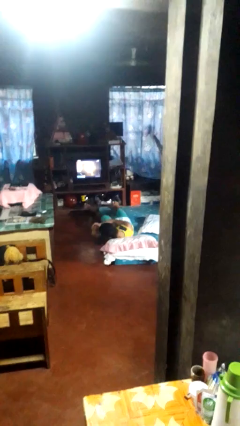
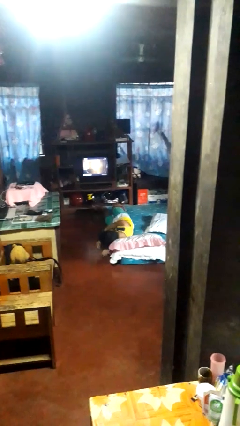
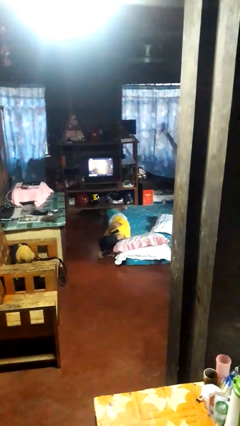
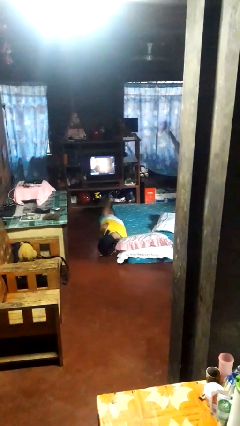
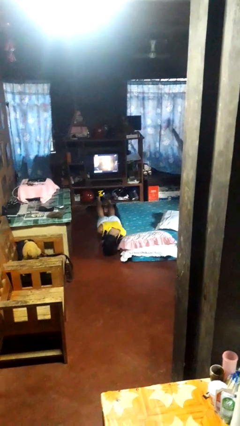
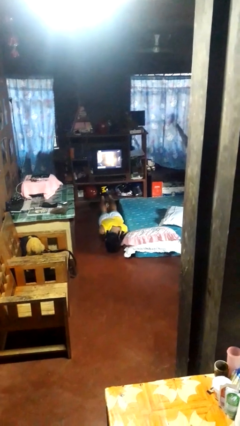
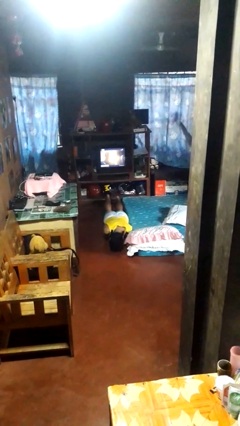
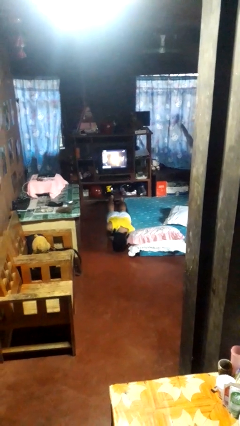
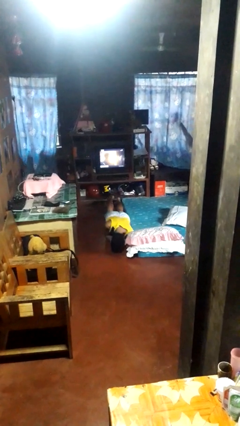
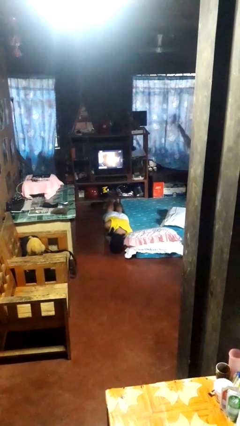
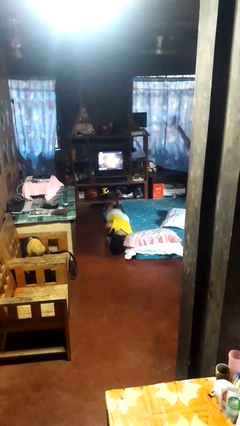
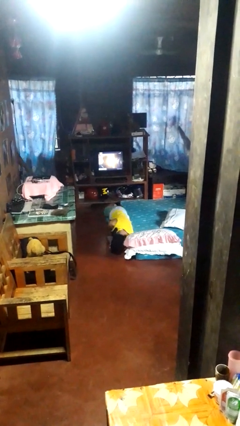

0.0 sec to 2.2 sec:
person falls from bed

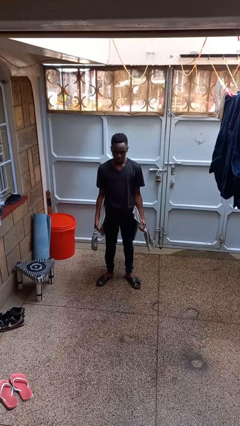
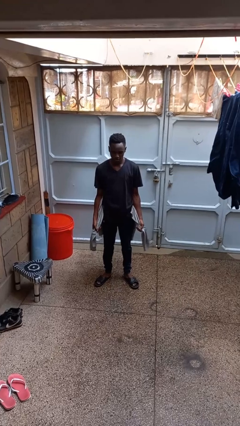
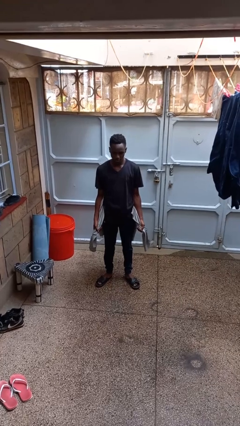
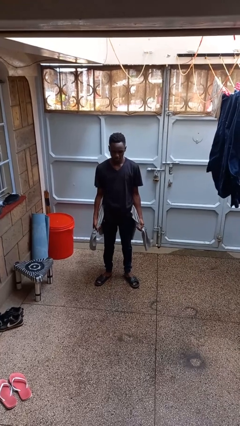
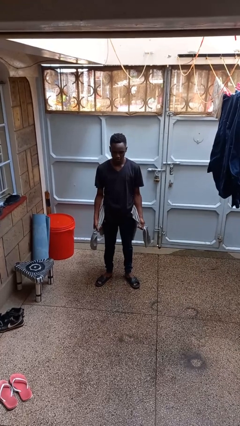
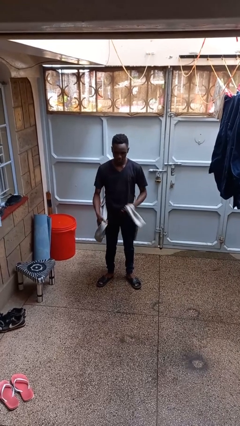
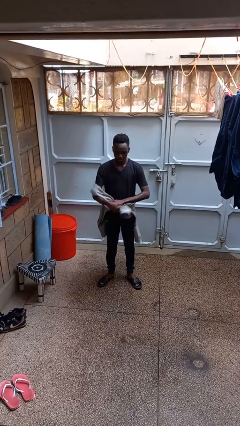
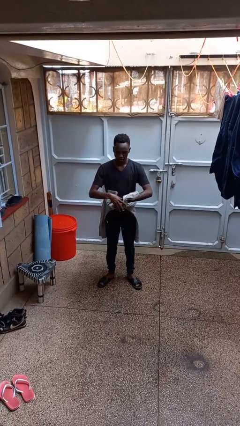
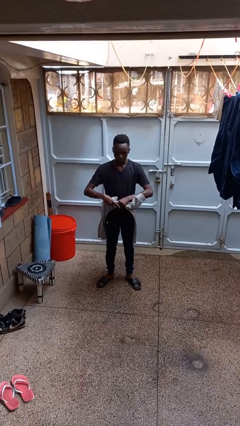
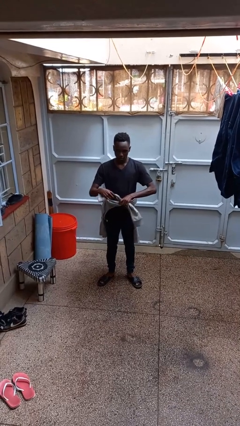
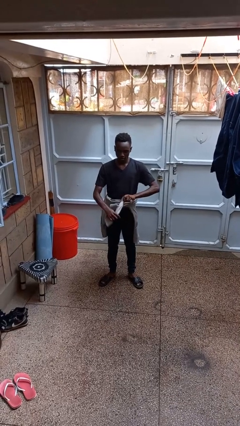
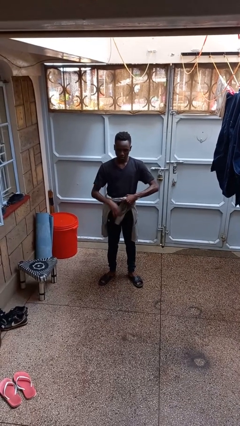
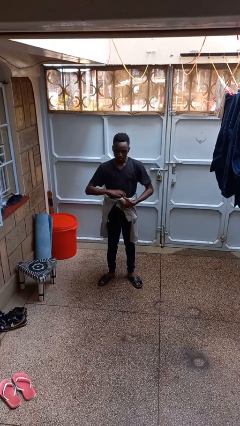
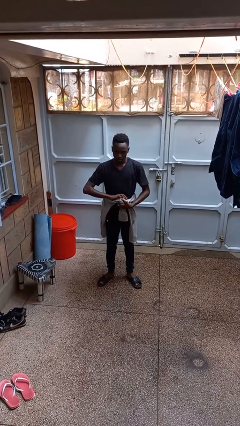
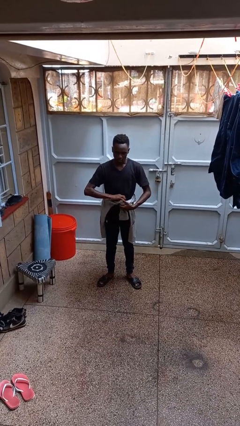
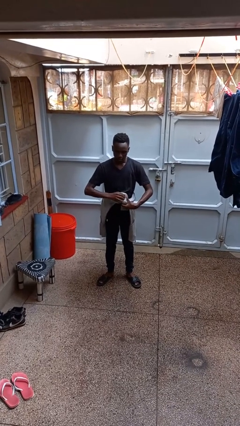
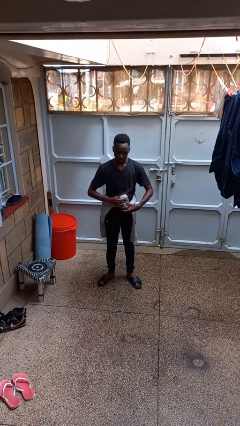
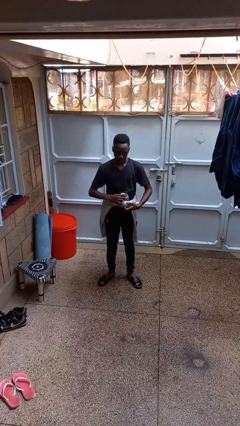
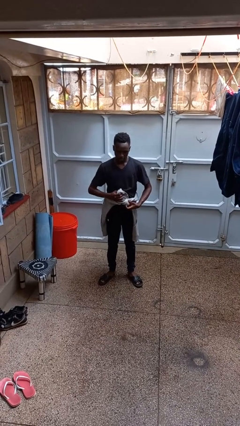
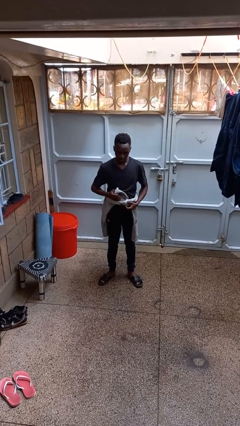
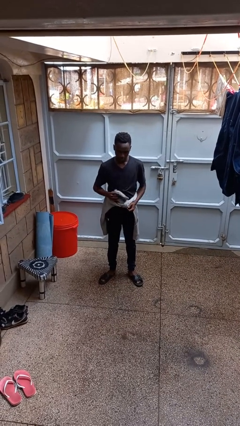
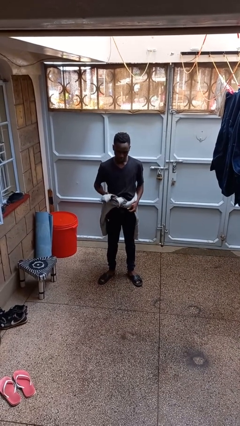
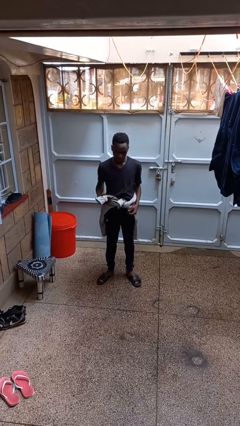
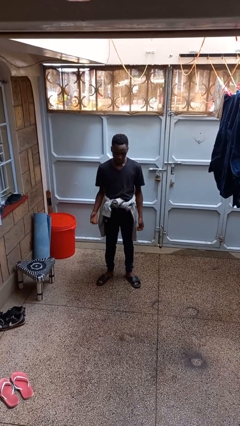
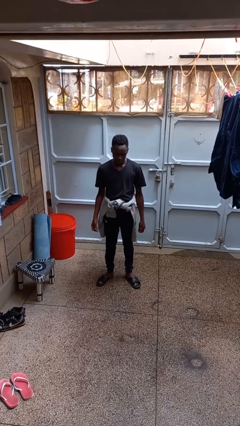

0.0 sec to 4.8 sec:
person ties jacket around waist

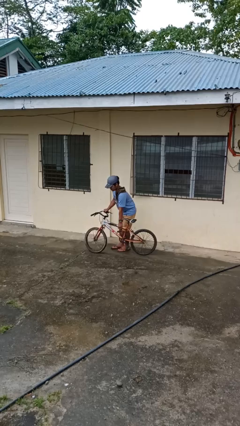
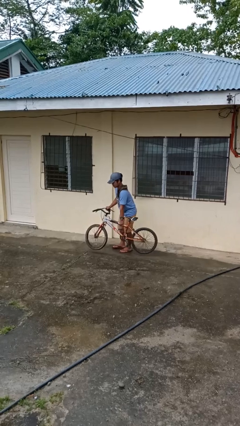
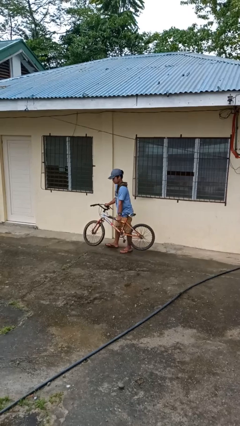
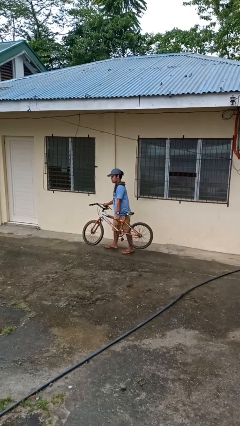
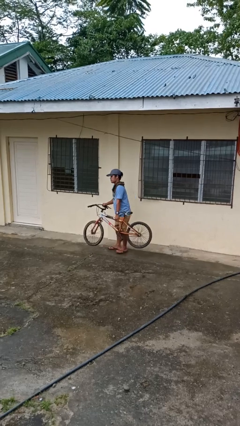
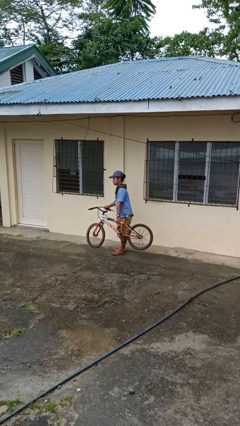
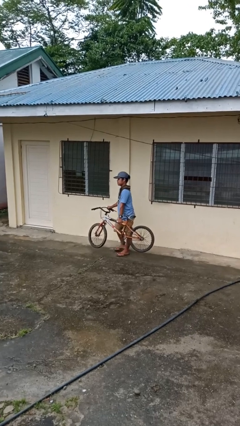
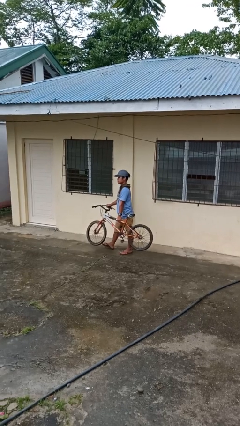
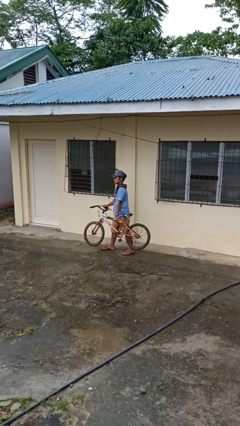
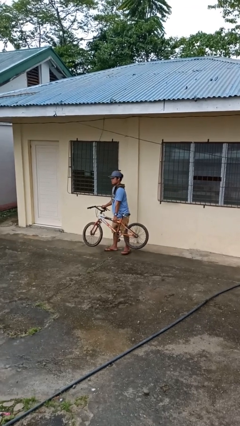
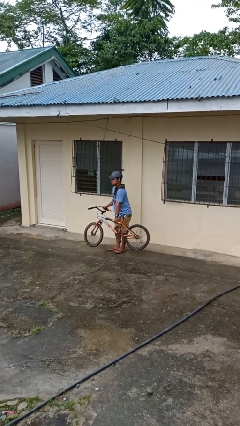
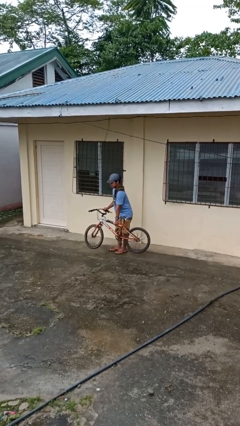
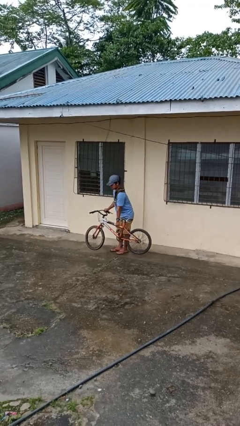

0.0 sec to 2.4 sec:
person carries bicycle

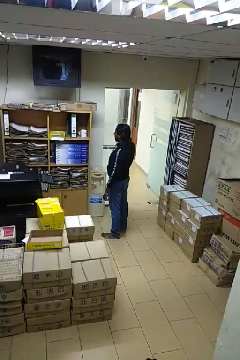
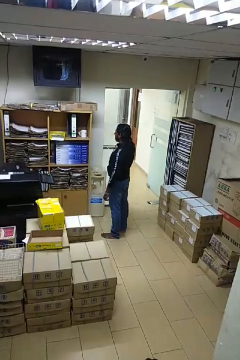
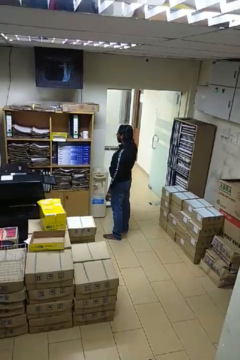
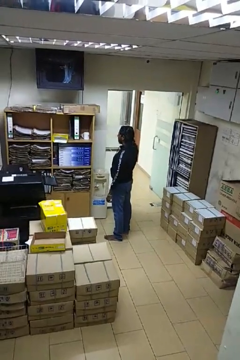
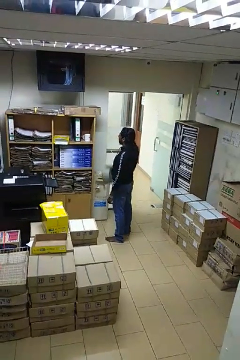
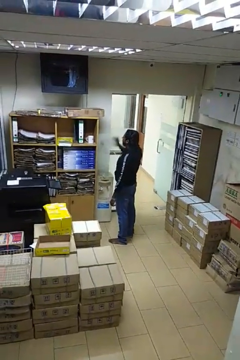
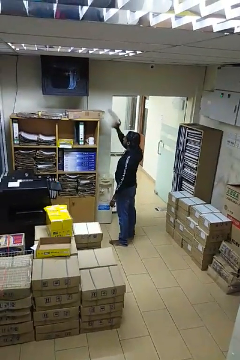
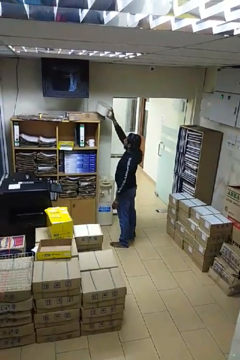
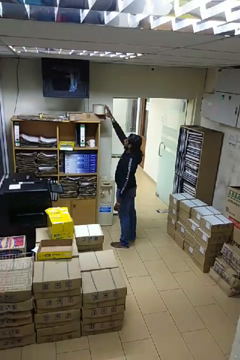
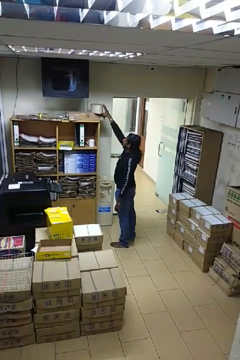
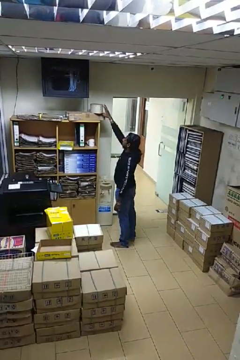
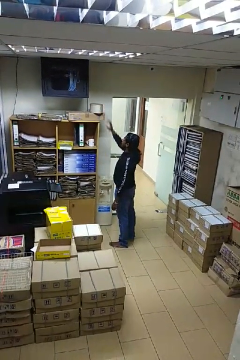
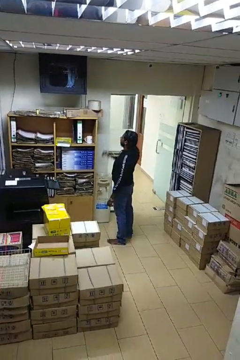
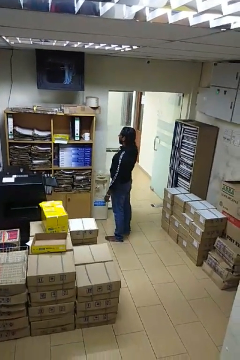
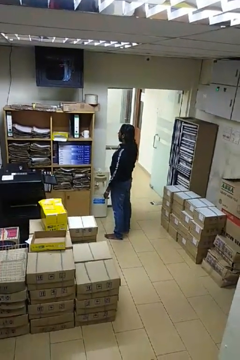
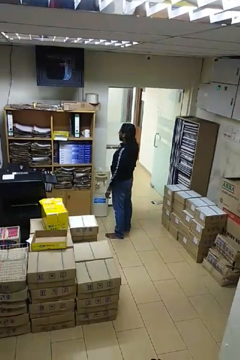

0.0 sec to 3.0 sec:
person puts down object on shelf

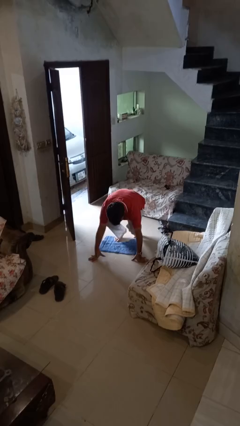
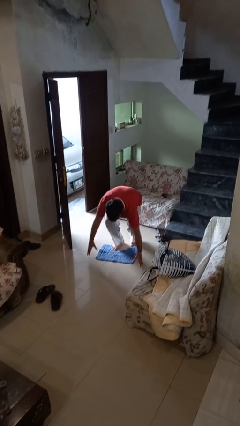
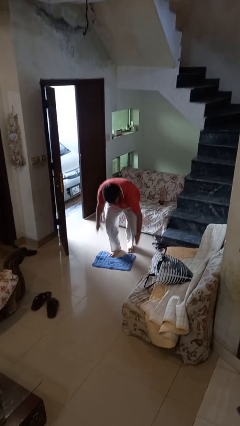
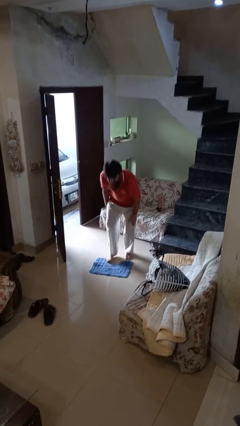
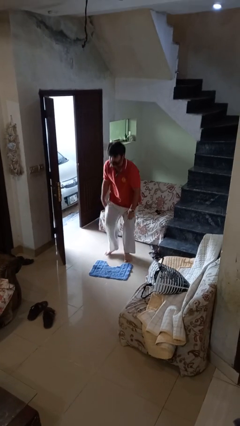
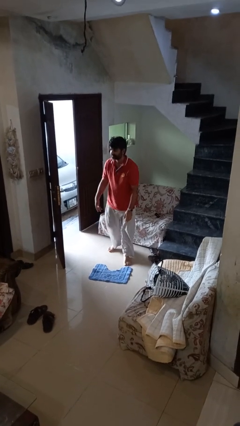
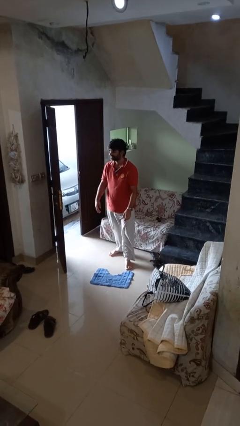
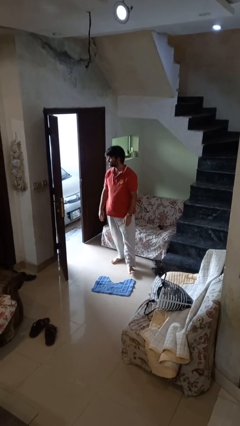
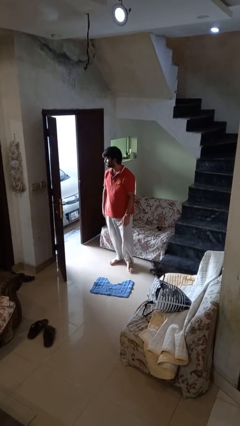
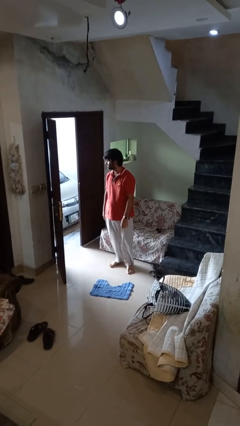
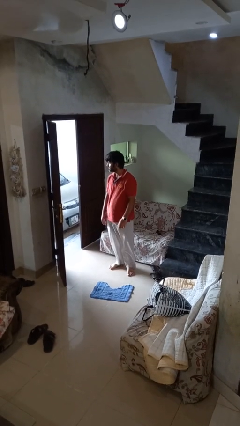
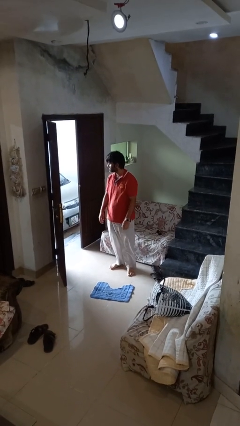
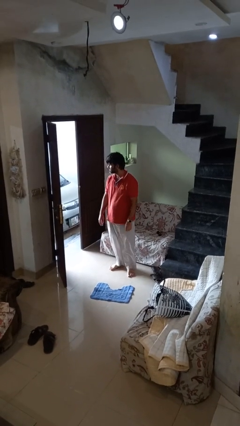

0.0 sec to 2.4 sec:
person stands up from floor

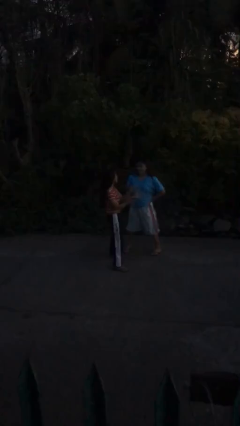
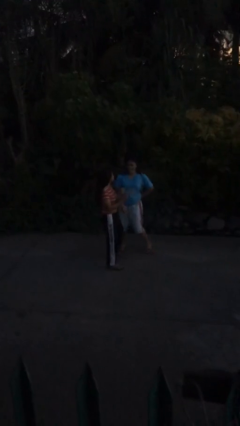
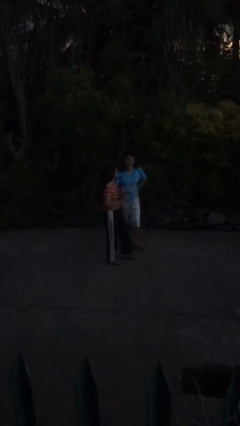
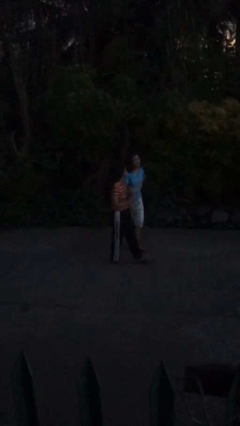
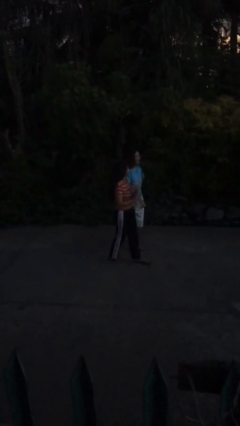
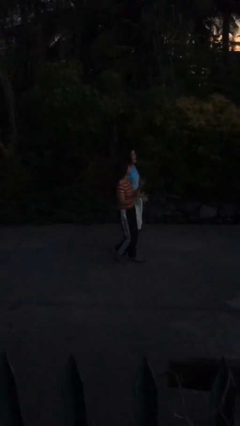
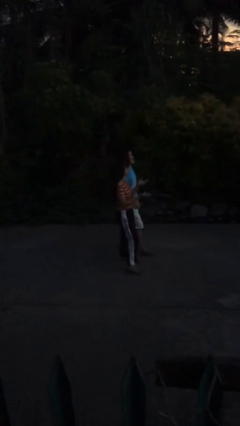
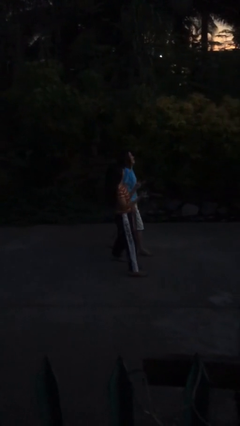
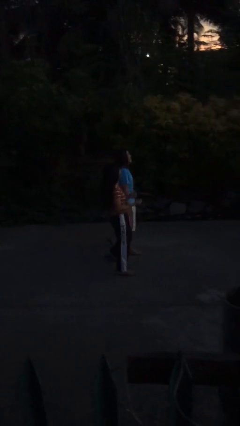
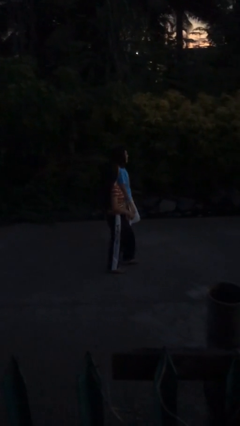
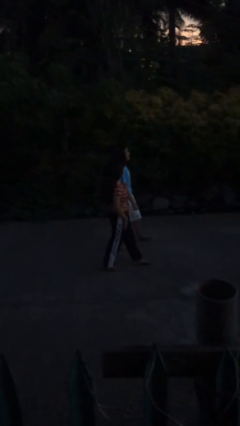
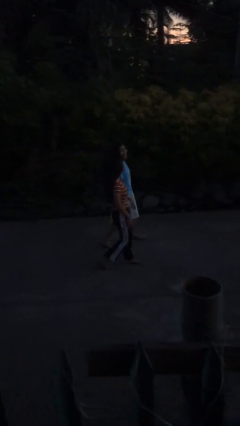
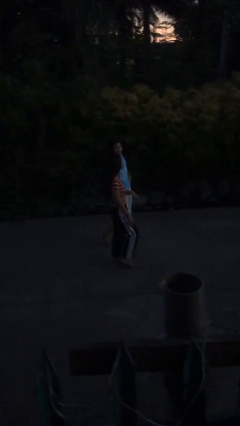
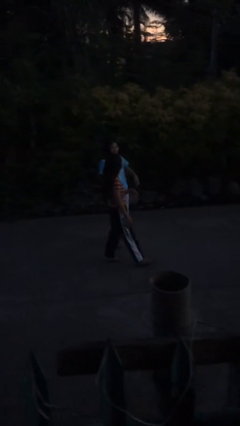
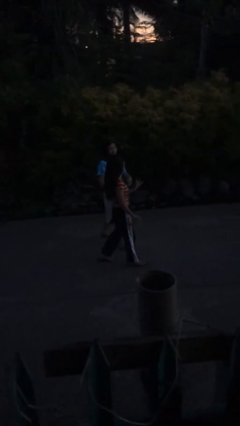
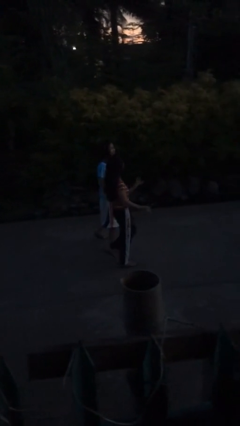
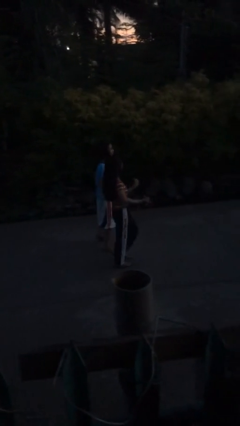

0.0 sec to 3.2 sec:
person talks to person
